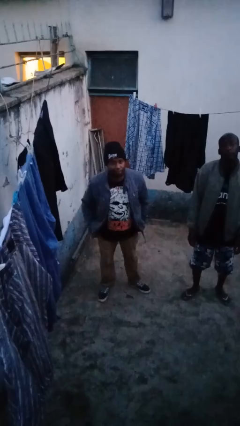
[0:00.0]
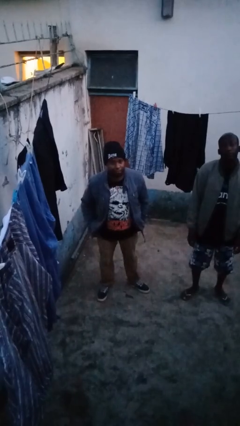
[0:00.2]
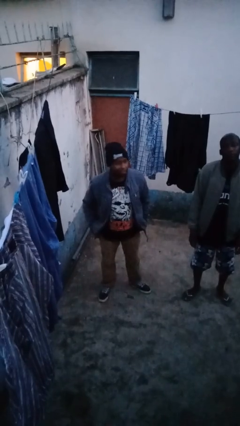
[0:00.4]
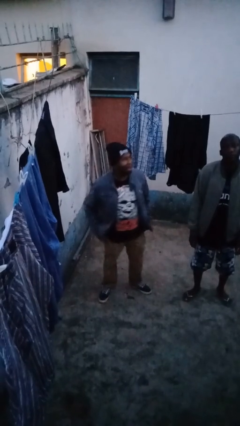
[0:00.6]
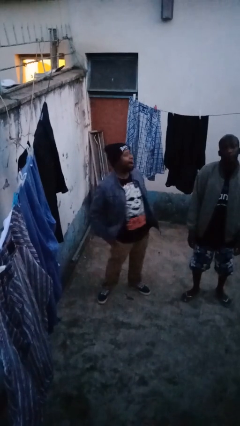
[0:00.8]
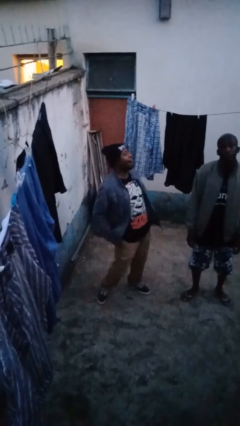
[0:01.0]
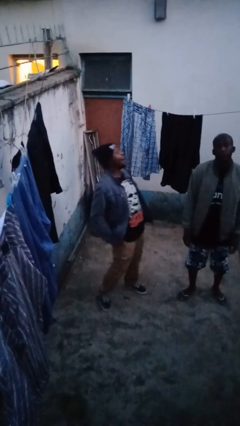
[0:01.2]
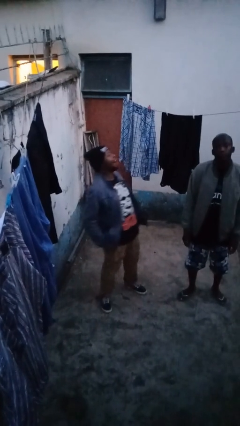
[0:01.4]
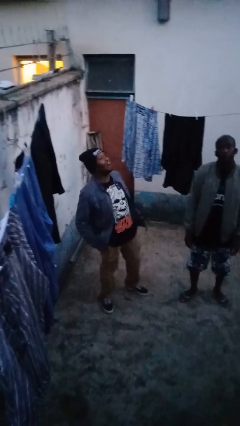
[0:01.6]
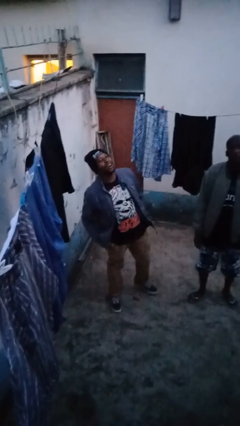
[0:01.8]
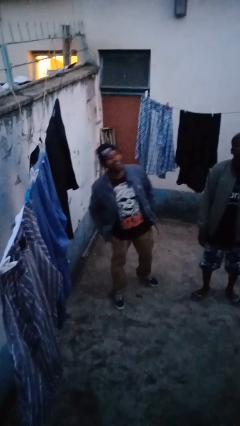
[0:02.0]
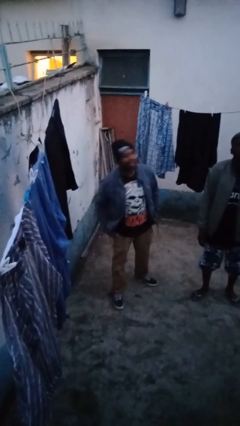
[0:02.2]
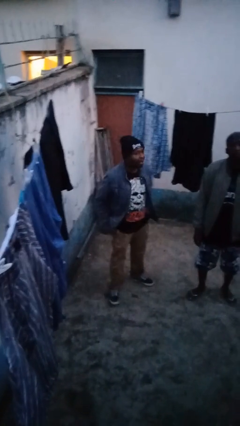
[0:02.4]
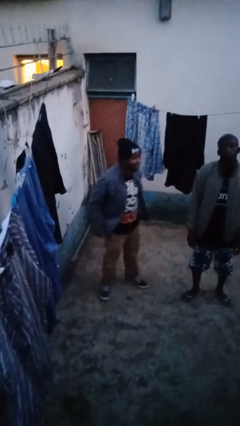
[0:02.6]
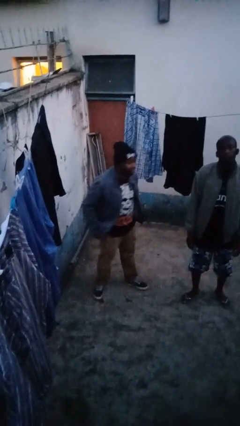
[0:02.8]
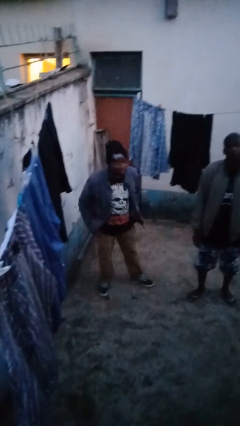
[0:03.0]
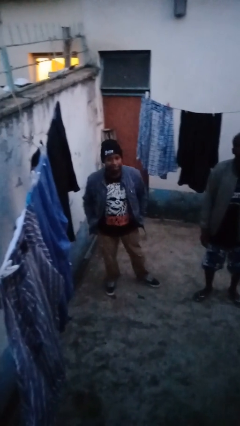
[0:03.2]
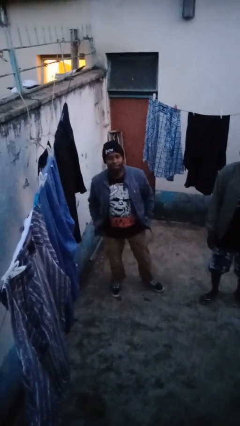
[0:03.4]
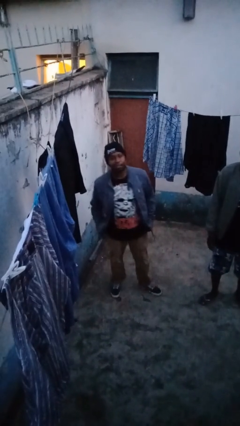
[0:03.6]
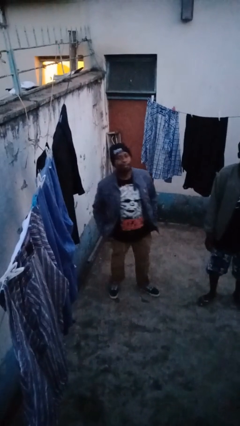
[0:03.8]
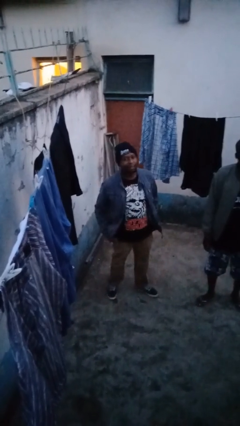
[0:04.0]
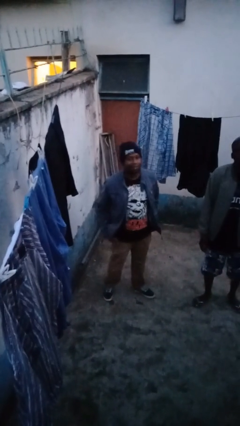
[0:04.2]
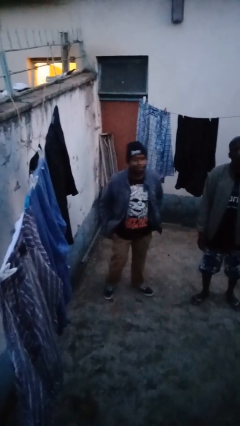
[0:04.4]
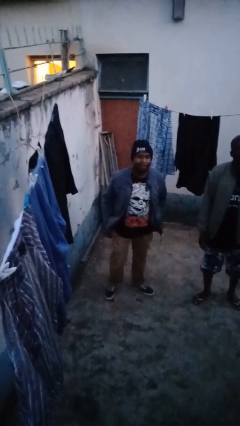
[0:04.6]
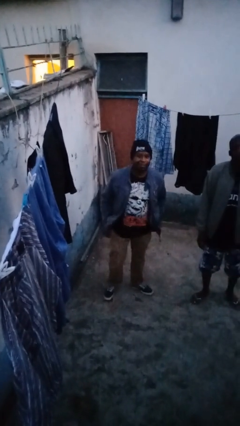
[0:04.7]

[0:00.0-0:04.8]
person laughs with person

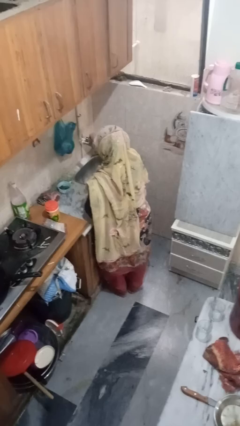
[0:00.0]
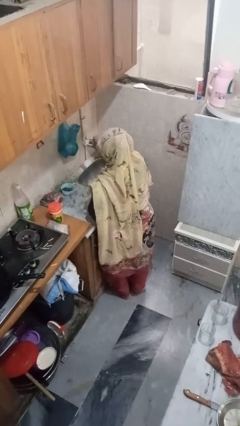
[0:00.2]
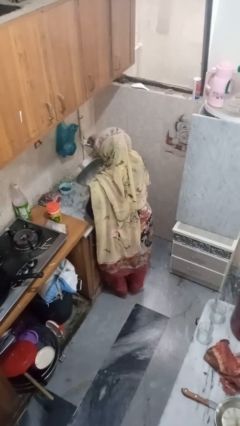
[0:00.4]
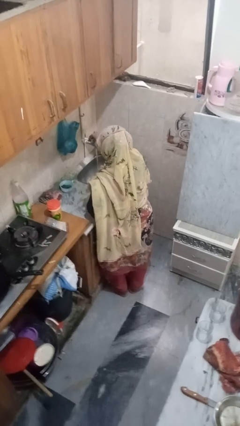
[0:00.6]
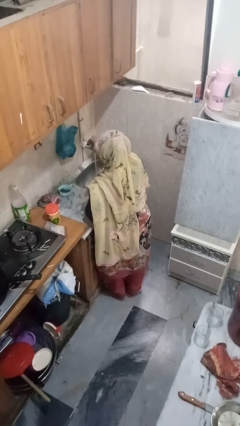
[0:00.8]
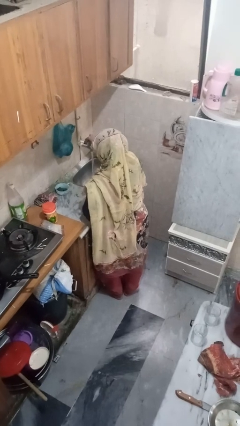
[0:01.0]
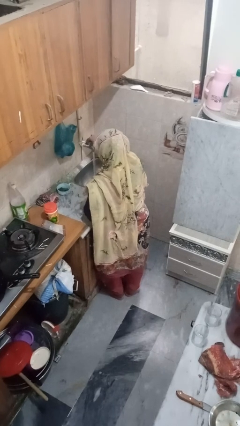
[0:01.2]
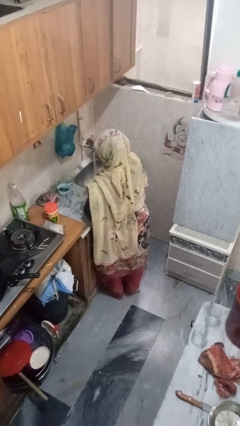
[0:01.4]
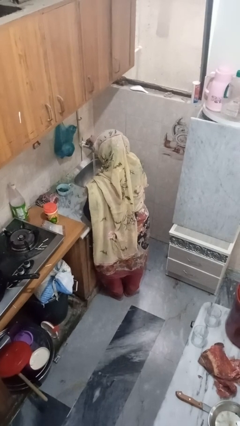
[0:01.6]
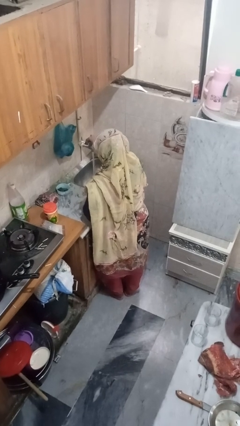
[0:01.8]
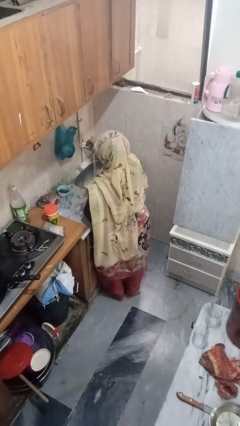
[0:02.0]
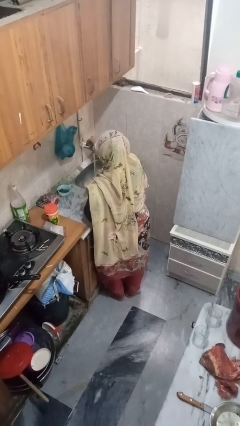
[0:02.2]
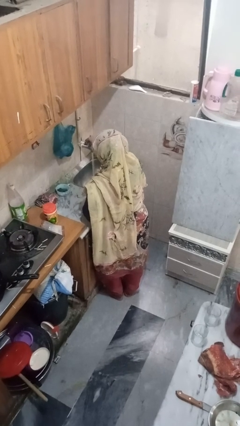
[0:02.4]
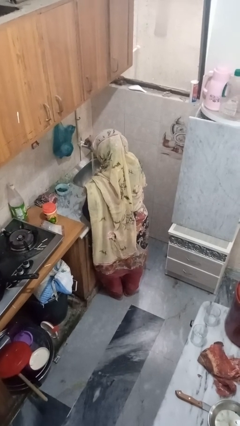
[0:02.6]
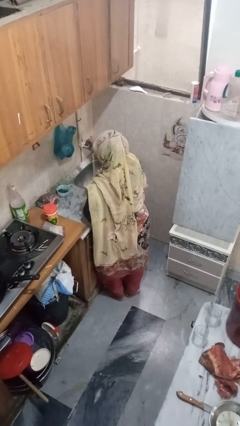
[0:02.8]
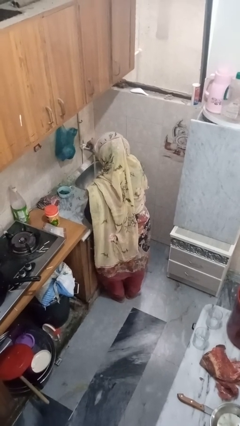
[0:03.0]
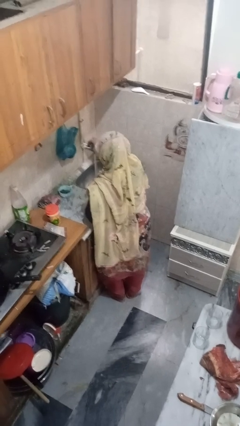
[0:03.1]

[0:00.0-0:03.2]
person turns on faucet

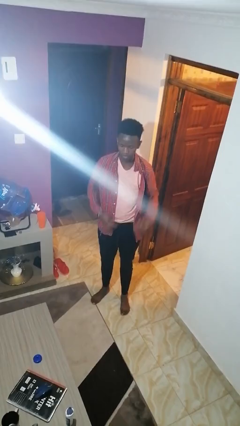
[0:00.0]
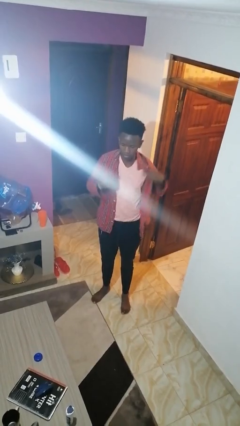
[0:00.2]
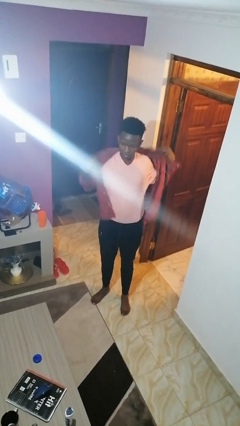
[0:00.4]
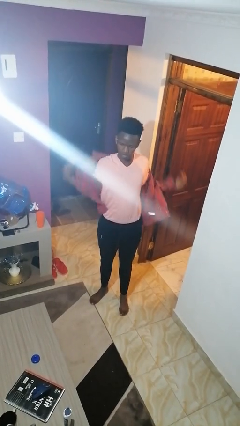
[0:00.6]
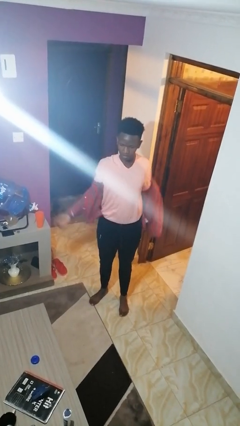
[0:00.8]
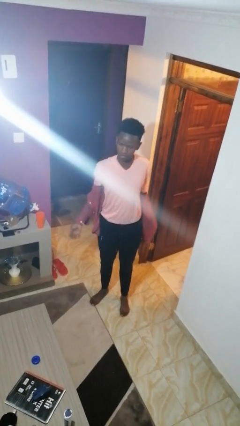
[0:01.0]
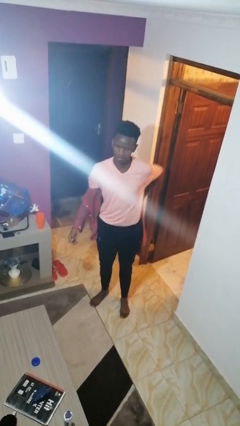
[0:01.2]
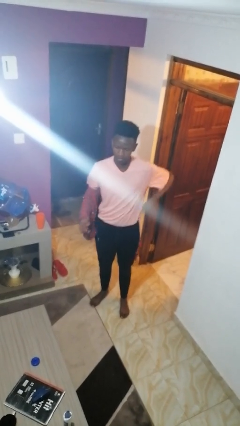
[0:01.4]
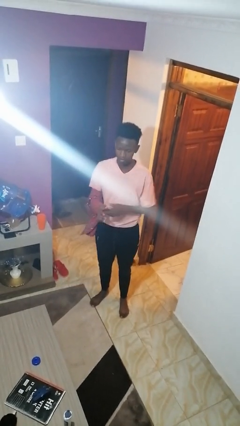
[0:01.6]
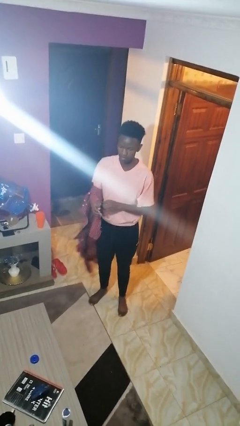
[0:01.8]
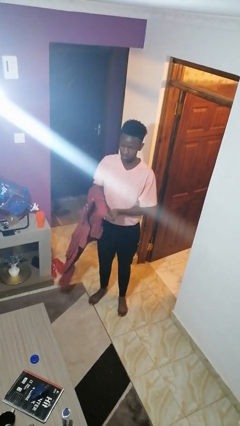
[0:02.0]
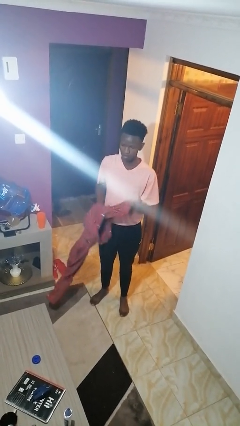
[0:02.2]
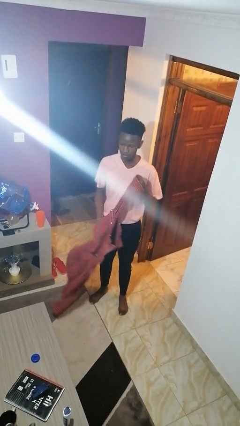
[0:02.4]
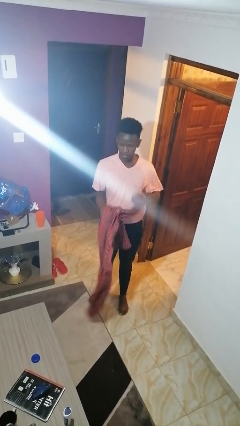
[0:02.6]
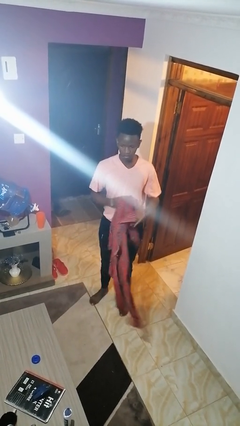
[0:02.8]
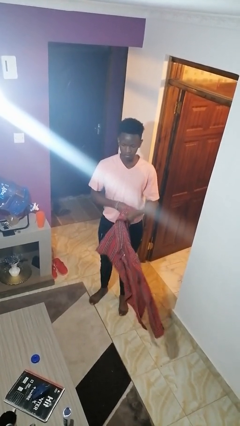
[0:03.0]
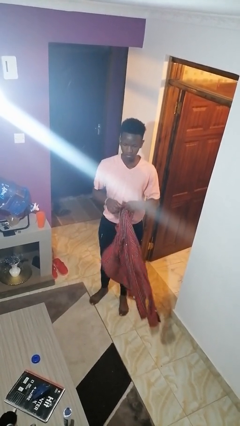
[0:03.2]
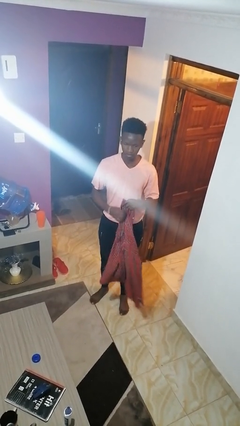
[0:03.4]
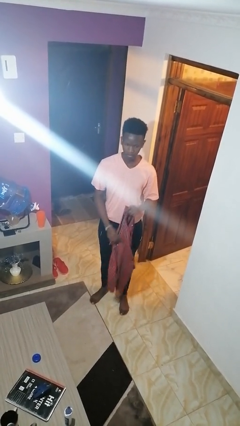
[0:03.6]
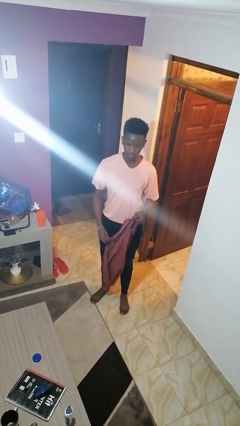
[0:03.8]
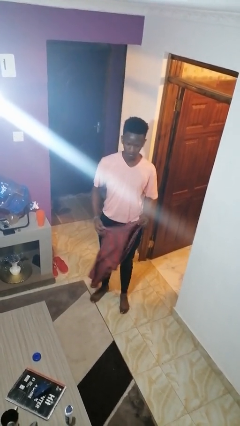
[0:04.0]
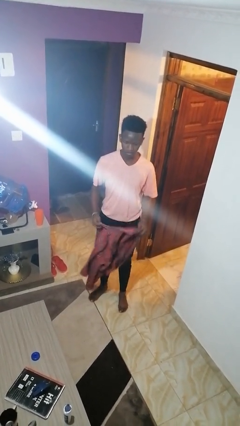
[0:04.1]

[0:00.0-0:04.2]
person takes off shirt

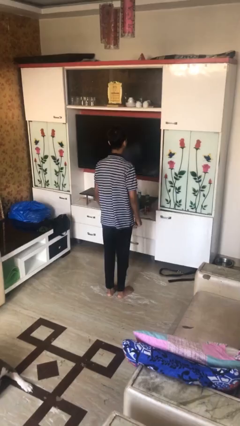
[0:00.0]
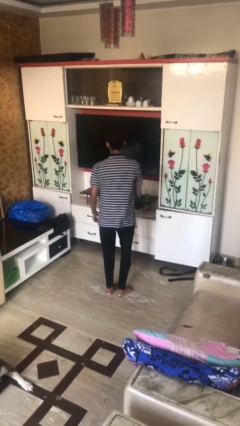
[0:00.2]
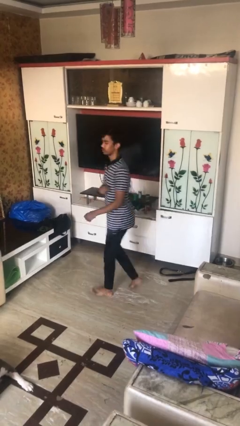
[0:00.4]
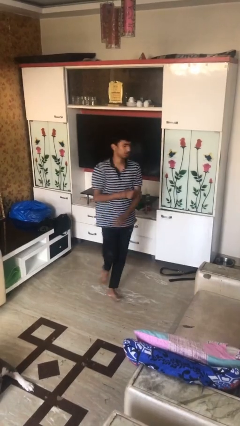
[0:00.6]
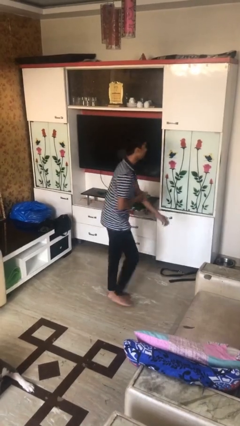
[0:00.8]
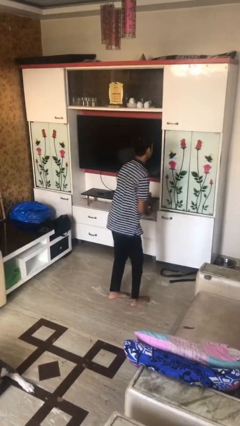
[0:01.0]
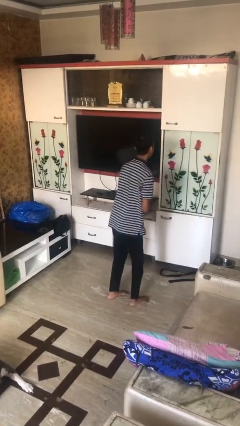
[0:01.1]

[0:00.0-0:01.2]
person twirls

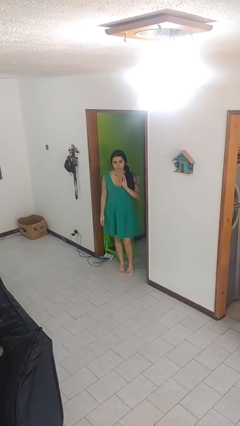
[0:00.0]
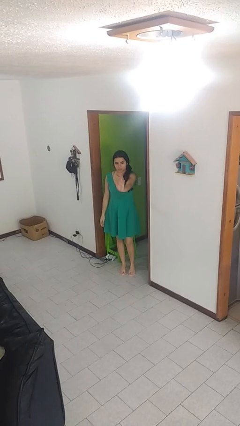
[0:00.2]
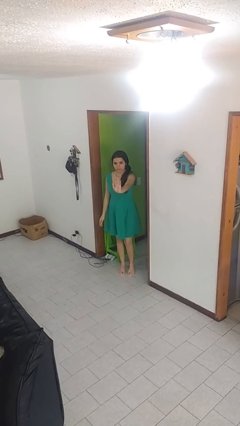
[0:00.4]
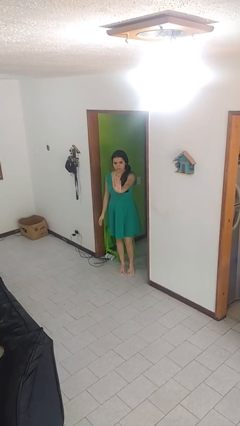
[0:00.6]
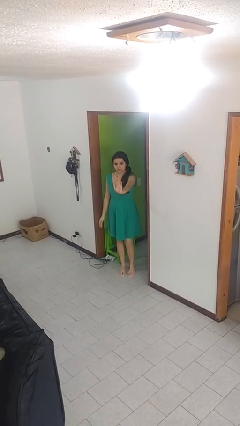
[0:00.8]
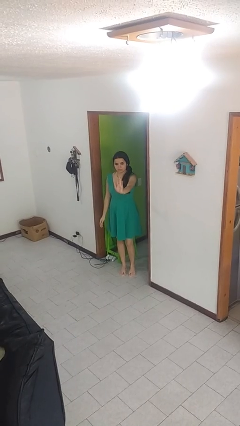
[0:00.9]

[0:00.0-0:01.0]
person gestures stop

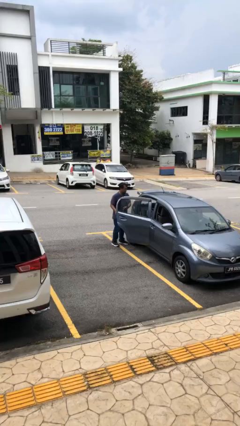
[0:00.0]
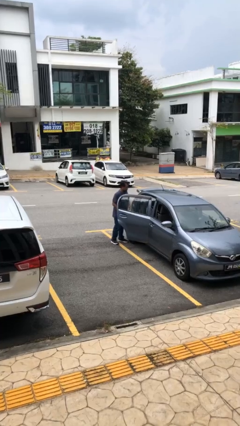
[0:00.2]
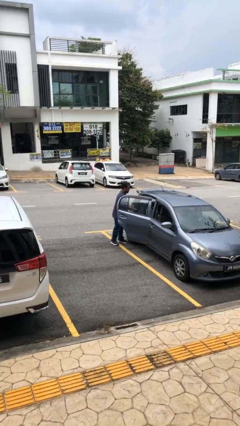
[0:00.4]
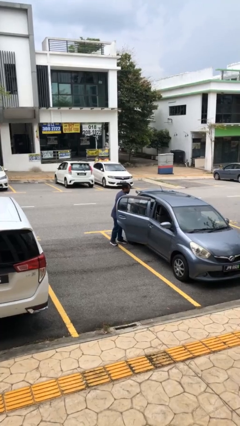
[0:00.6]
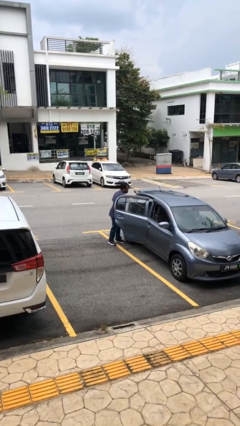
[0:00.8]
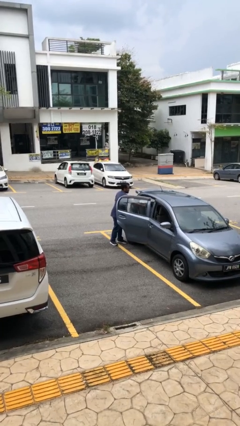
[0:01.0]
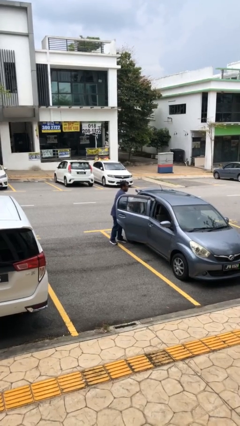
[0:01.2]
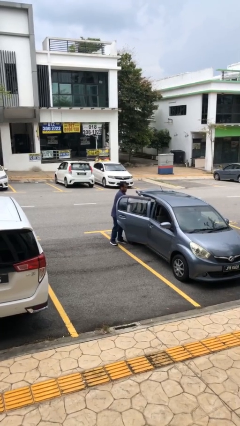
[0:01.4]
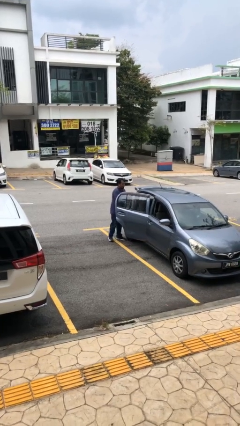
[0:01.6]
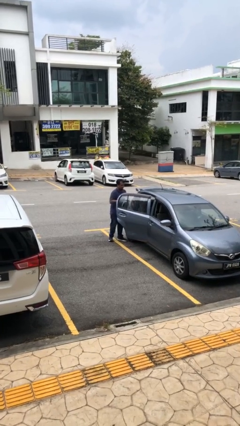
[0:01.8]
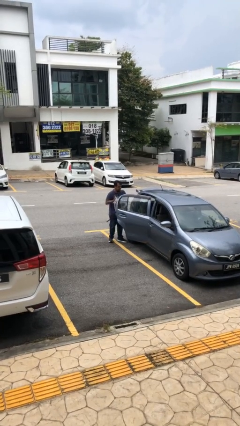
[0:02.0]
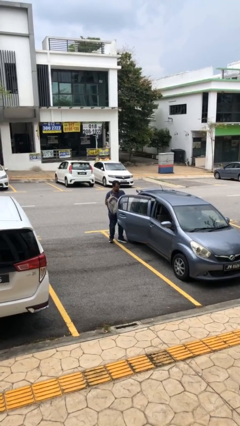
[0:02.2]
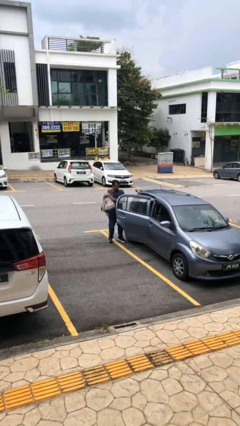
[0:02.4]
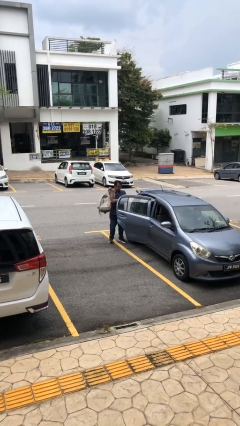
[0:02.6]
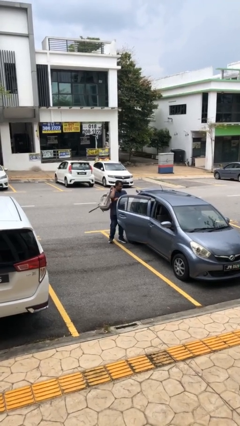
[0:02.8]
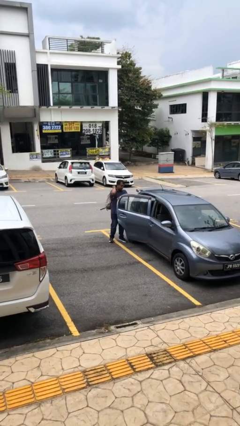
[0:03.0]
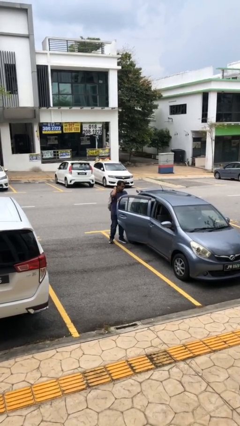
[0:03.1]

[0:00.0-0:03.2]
person unloads car

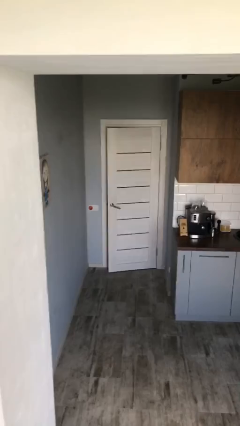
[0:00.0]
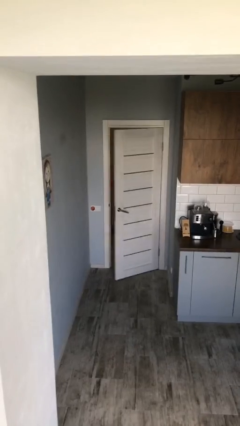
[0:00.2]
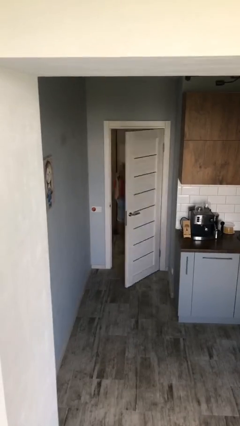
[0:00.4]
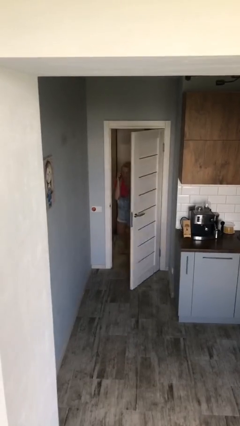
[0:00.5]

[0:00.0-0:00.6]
person opens facility door
